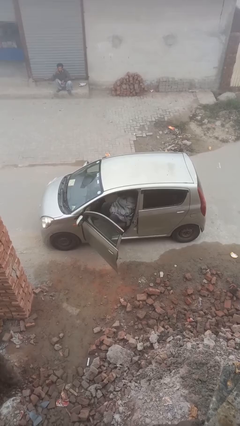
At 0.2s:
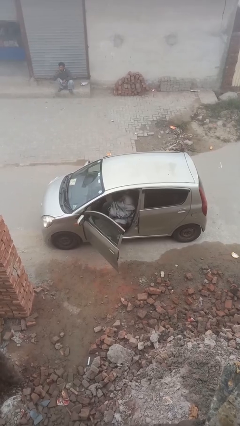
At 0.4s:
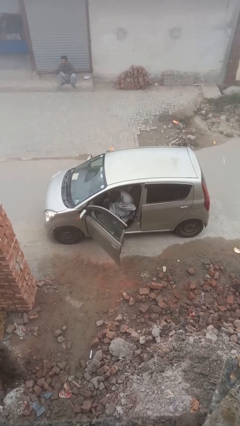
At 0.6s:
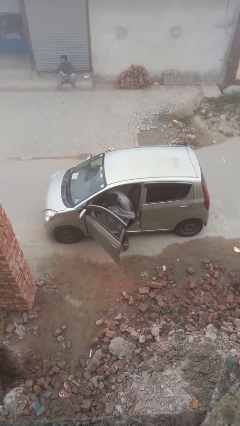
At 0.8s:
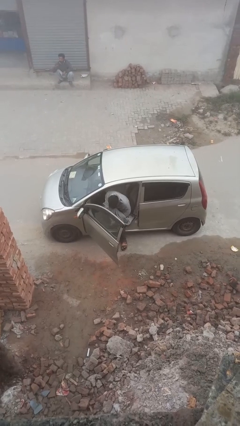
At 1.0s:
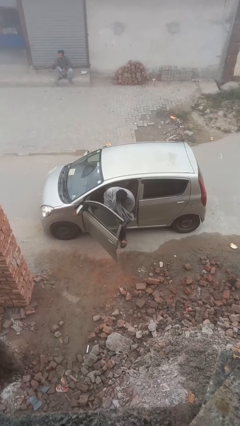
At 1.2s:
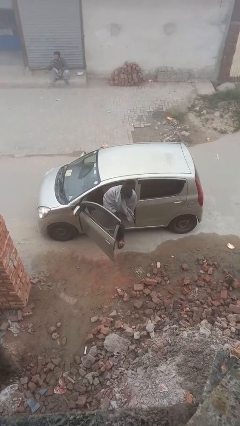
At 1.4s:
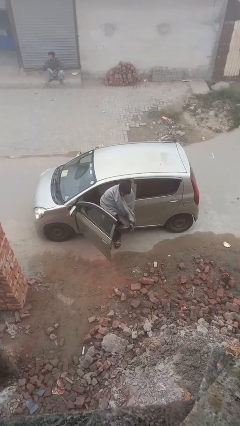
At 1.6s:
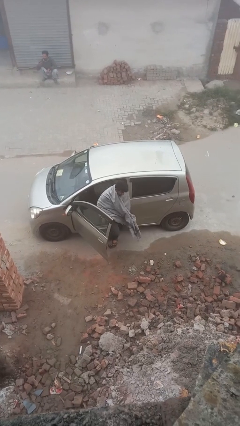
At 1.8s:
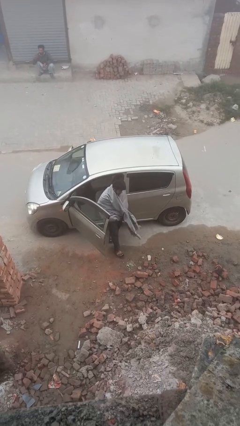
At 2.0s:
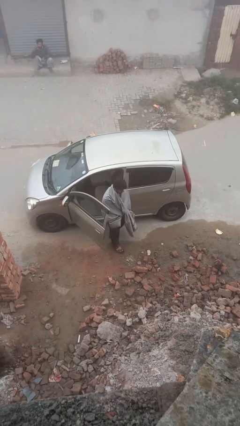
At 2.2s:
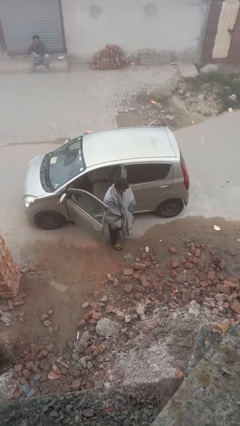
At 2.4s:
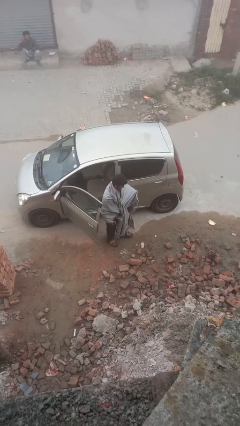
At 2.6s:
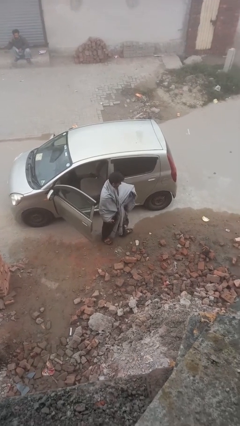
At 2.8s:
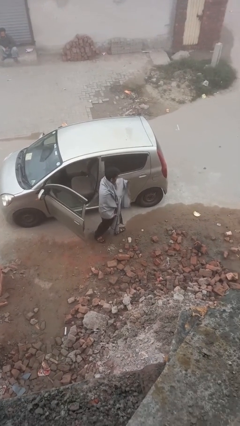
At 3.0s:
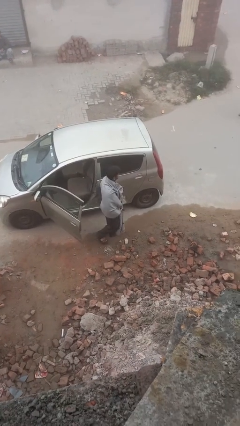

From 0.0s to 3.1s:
person exits car

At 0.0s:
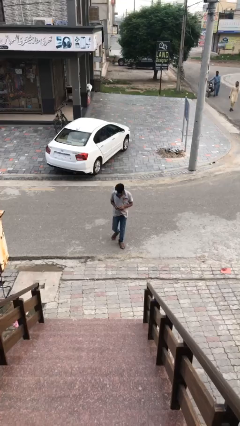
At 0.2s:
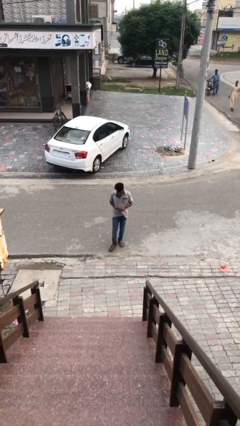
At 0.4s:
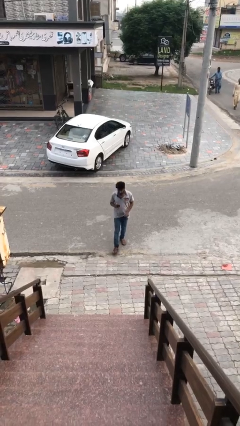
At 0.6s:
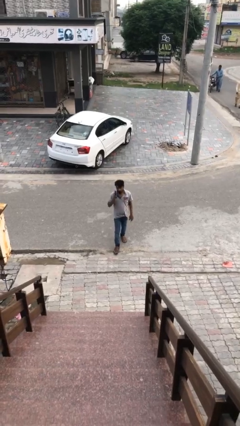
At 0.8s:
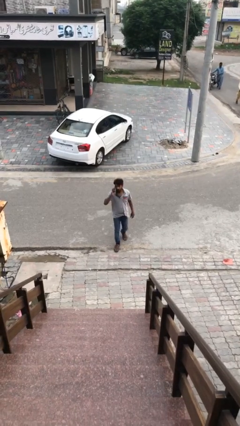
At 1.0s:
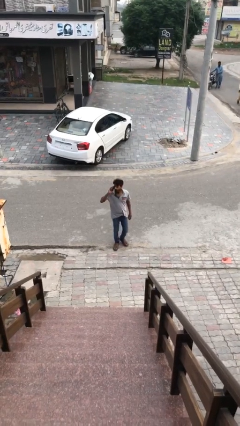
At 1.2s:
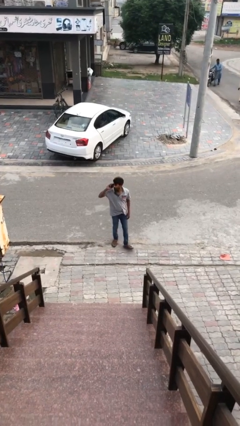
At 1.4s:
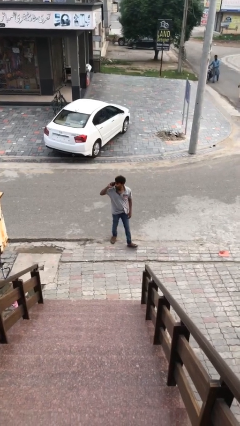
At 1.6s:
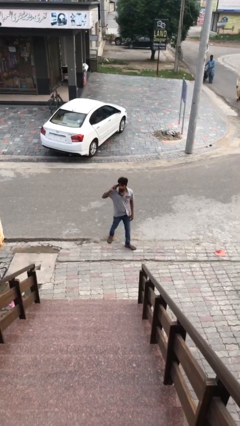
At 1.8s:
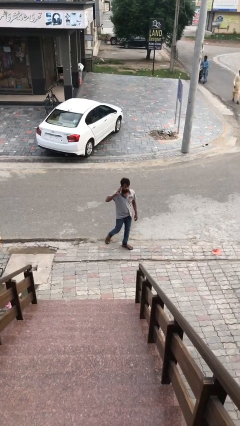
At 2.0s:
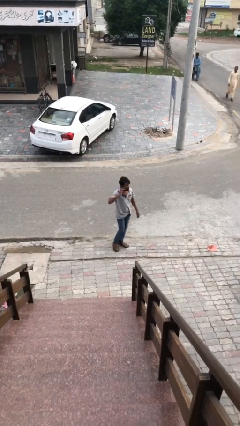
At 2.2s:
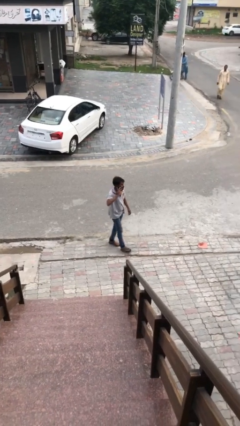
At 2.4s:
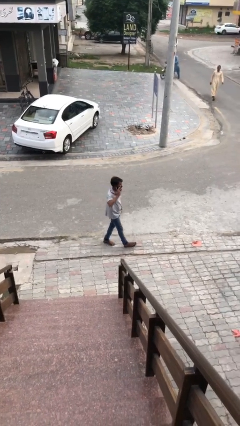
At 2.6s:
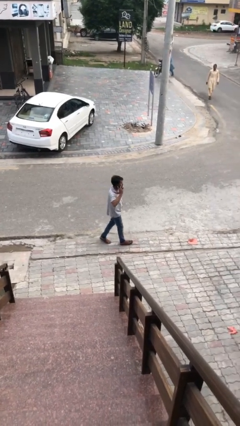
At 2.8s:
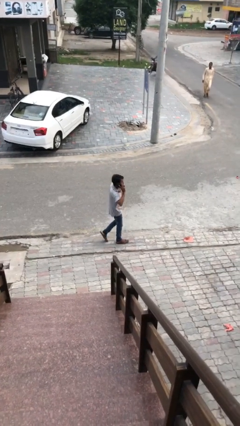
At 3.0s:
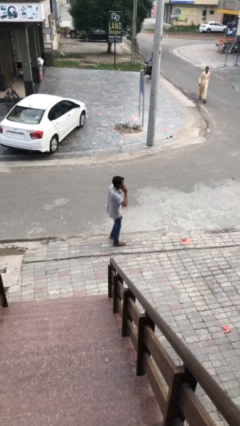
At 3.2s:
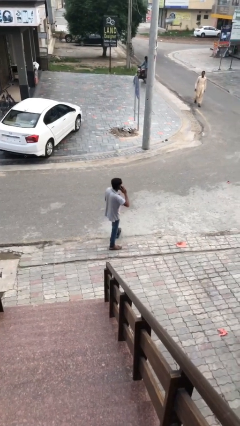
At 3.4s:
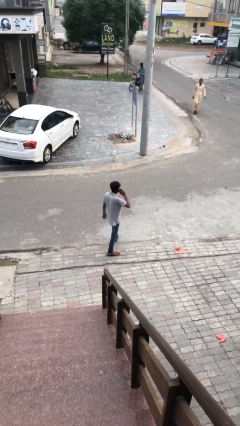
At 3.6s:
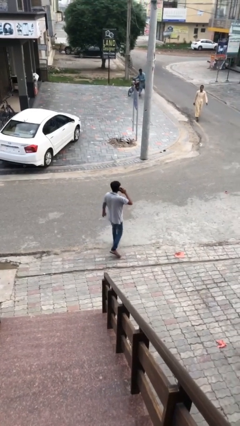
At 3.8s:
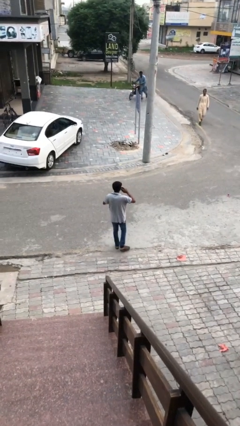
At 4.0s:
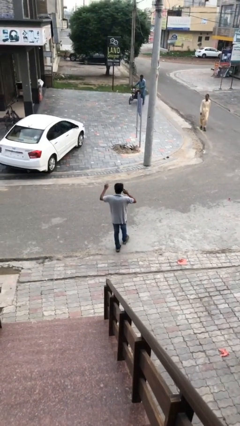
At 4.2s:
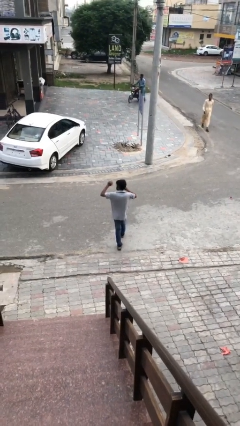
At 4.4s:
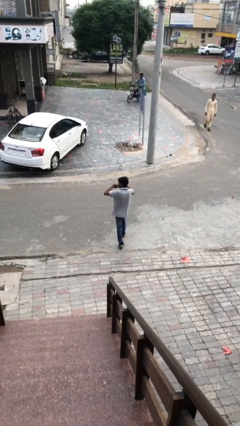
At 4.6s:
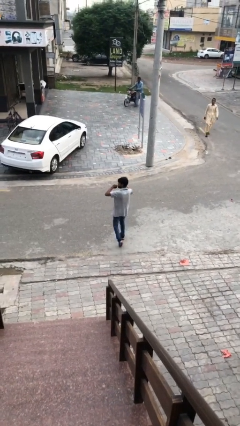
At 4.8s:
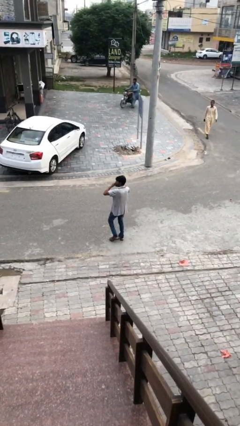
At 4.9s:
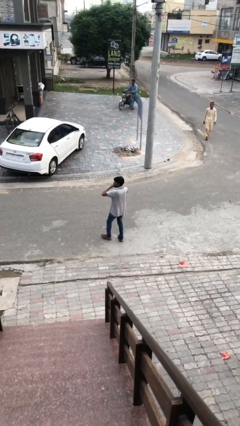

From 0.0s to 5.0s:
person talks on phone

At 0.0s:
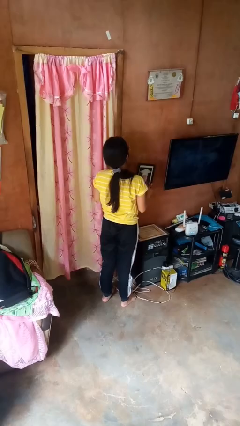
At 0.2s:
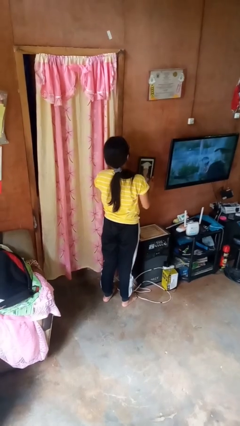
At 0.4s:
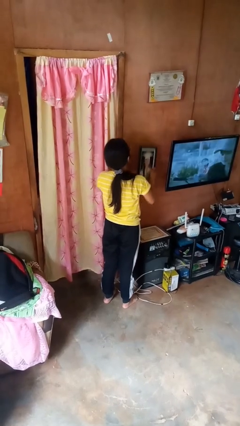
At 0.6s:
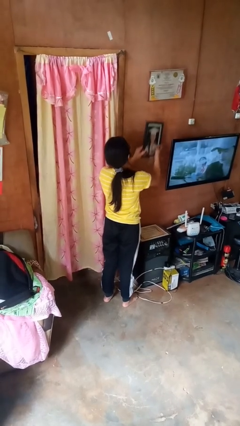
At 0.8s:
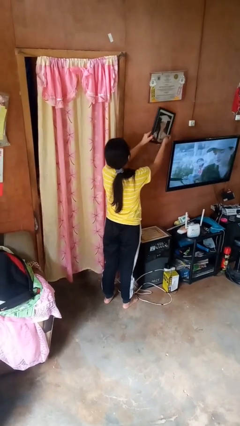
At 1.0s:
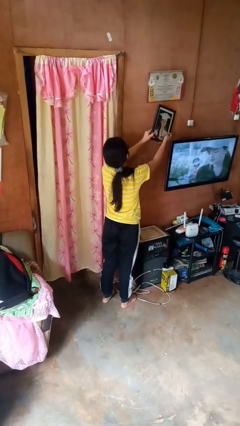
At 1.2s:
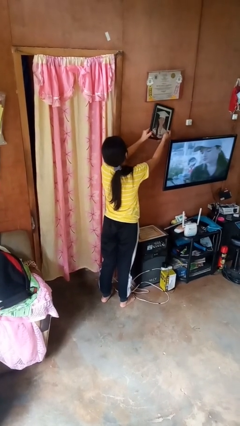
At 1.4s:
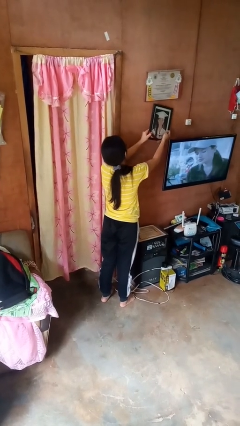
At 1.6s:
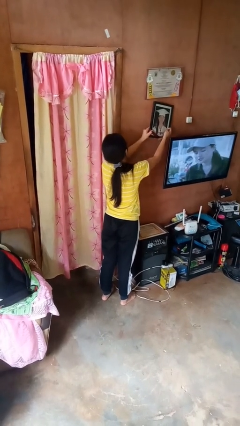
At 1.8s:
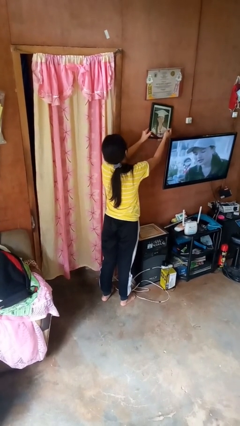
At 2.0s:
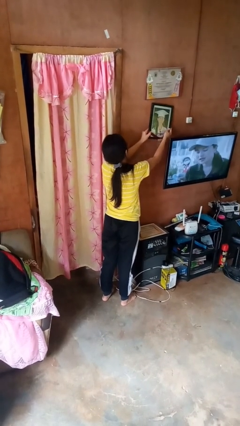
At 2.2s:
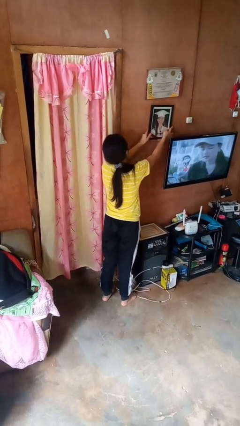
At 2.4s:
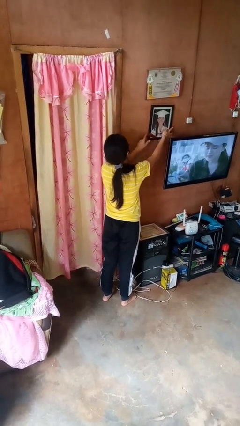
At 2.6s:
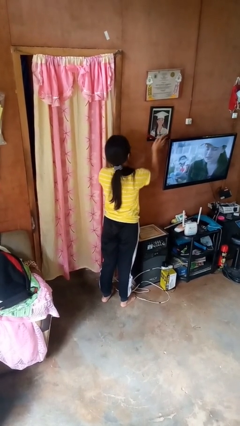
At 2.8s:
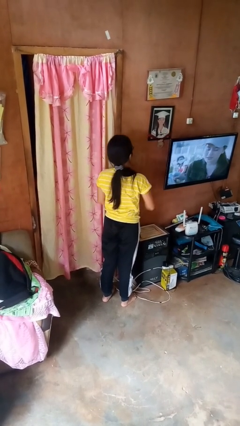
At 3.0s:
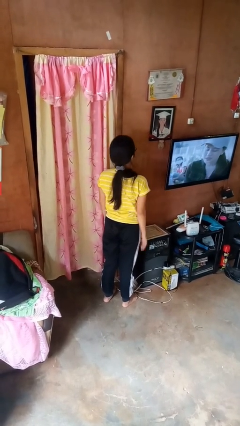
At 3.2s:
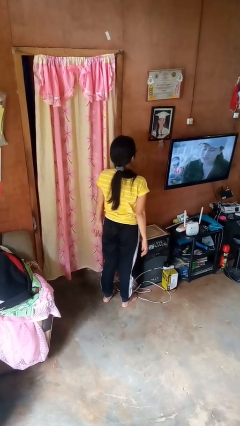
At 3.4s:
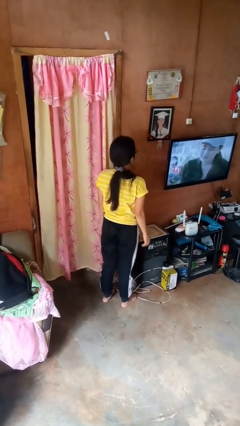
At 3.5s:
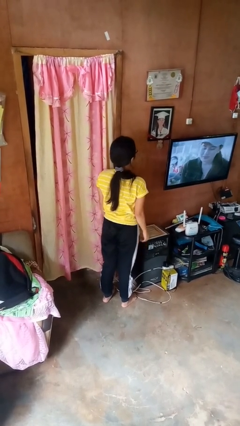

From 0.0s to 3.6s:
person puts up picture frame

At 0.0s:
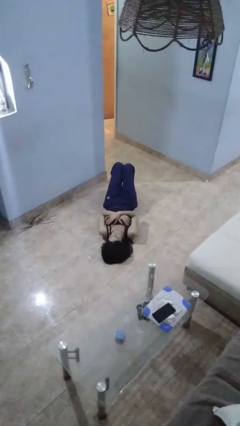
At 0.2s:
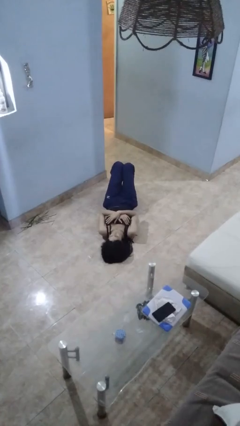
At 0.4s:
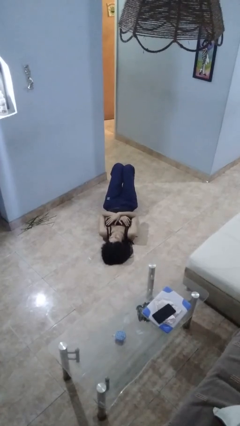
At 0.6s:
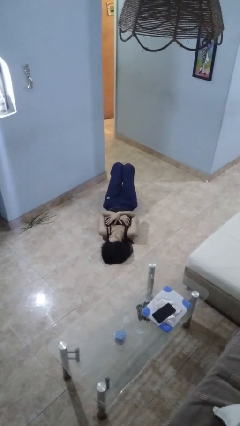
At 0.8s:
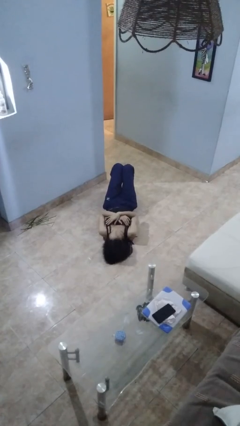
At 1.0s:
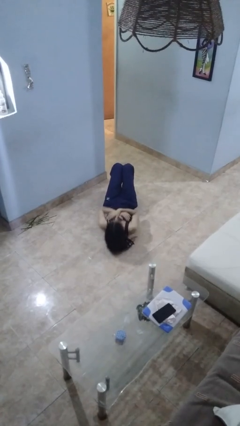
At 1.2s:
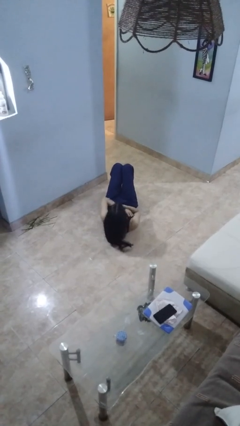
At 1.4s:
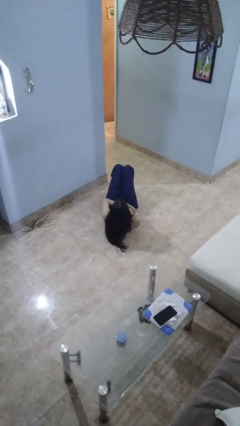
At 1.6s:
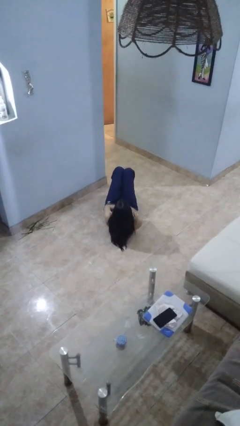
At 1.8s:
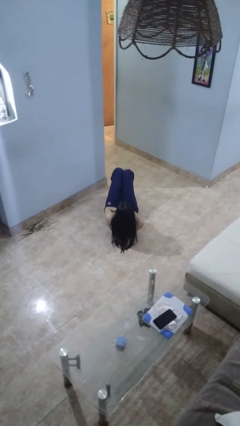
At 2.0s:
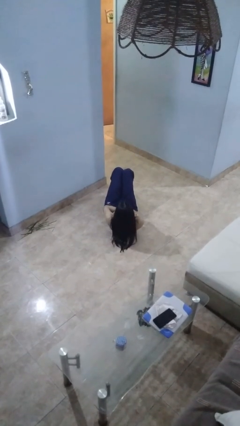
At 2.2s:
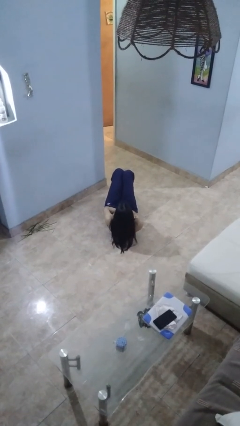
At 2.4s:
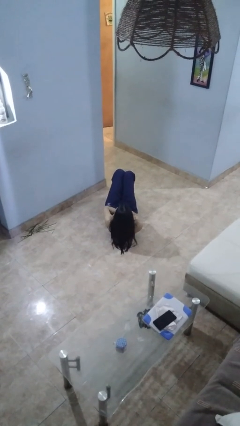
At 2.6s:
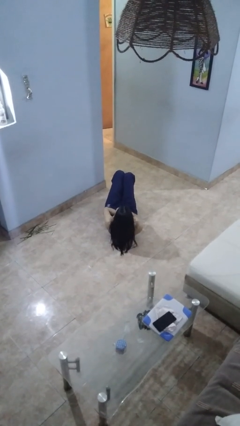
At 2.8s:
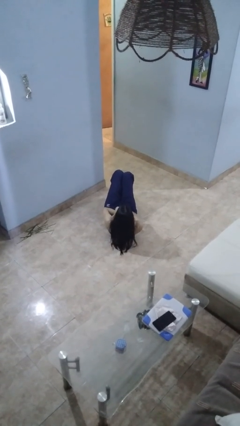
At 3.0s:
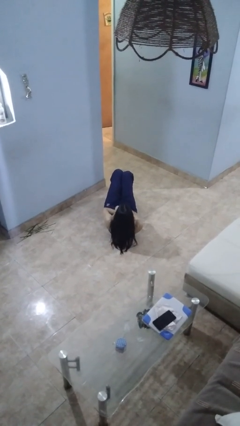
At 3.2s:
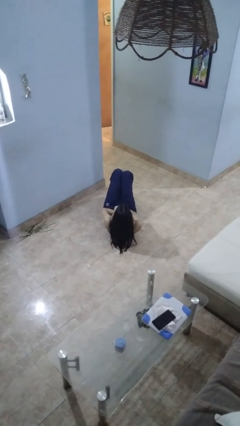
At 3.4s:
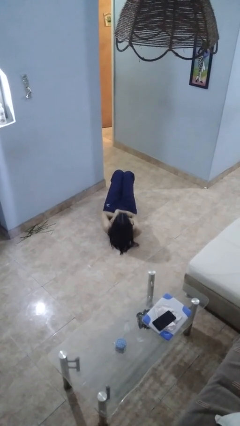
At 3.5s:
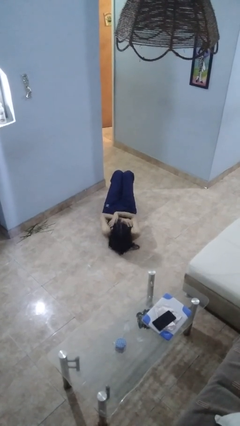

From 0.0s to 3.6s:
person exercises with situp

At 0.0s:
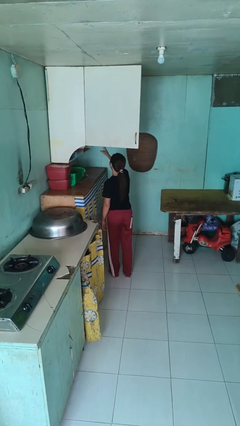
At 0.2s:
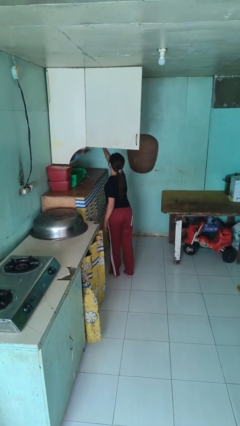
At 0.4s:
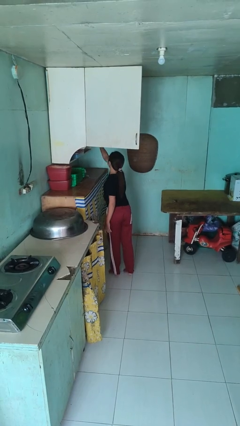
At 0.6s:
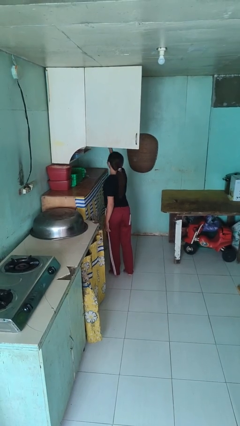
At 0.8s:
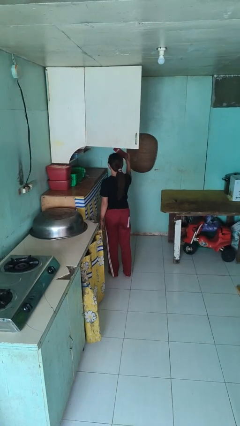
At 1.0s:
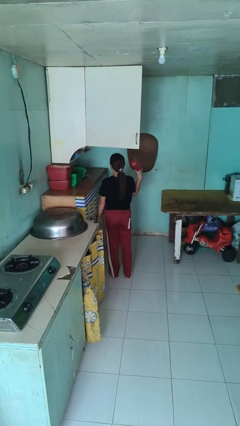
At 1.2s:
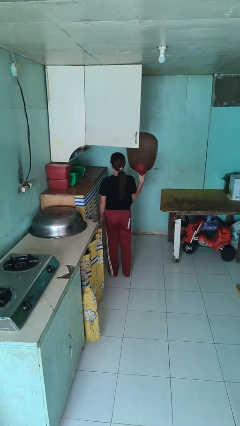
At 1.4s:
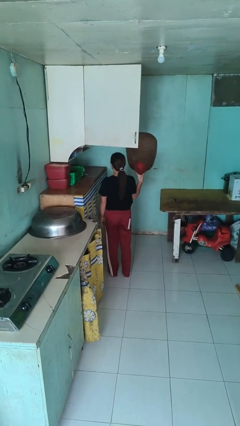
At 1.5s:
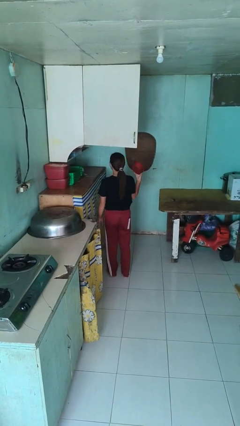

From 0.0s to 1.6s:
person takes object from cabinet

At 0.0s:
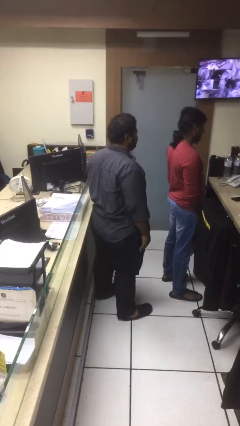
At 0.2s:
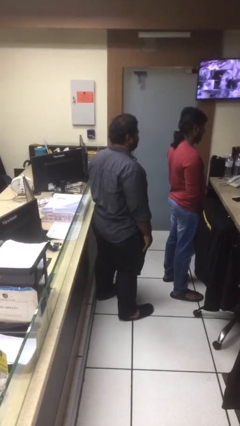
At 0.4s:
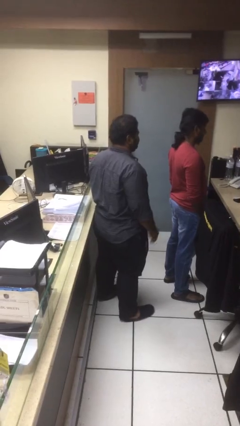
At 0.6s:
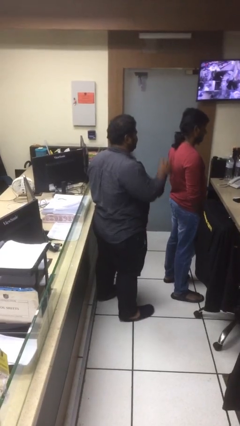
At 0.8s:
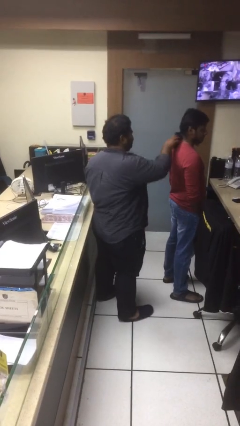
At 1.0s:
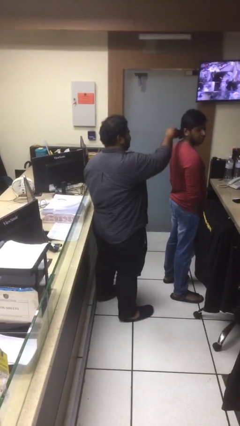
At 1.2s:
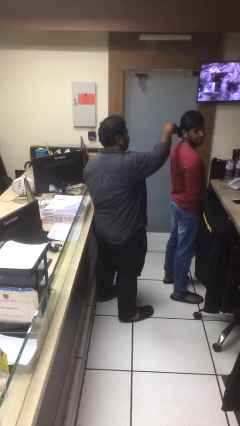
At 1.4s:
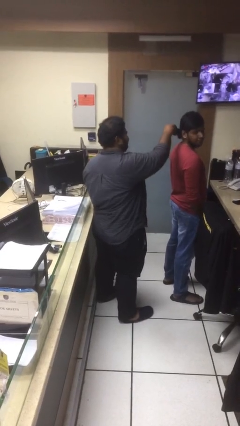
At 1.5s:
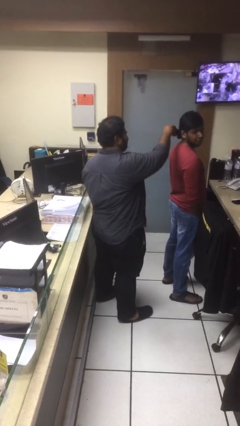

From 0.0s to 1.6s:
person grabs person by hair
